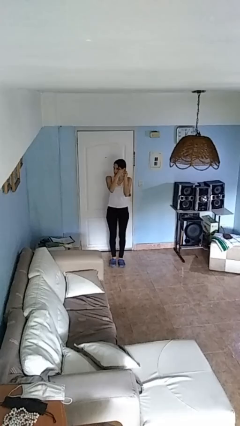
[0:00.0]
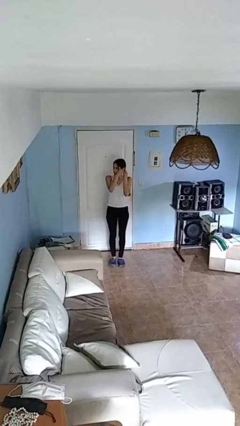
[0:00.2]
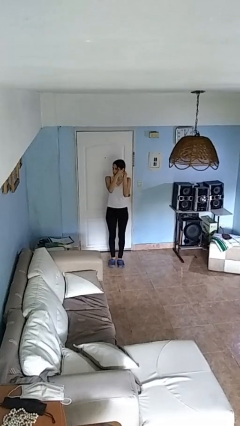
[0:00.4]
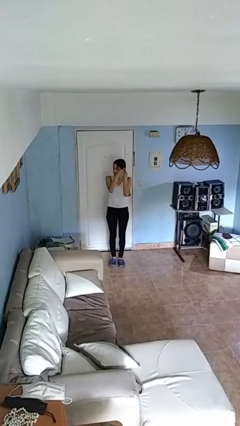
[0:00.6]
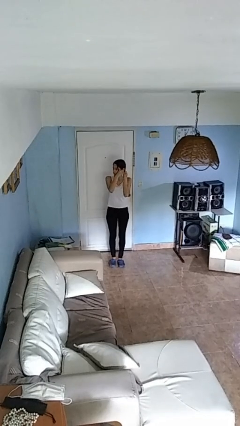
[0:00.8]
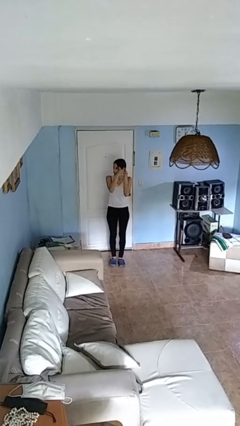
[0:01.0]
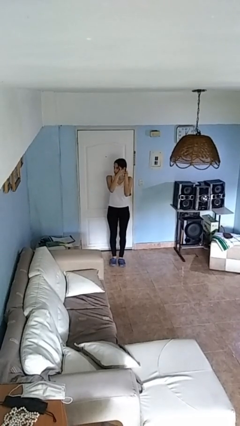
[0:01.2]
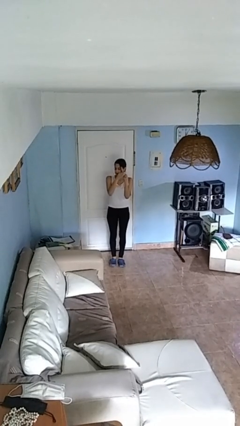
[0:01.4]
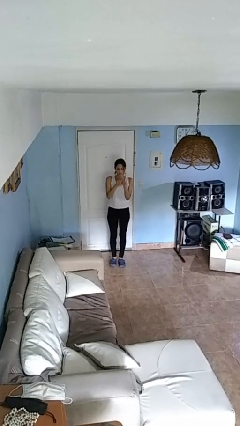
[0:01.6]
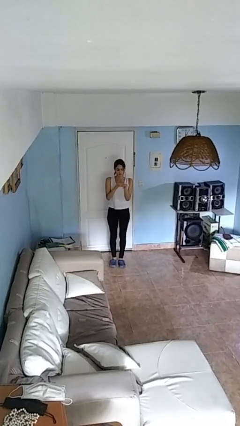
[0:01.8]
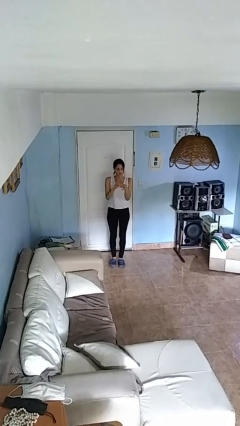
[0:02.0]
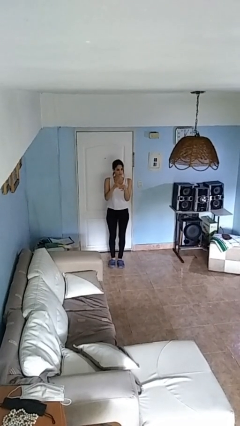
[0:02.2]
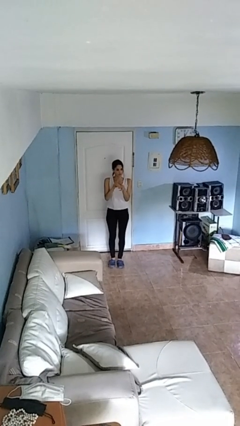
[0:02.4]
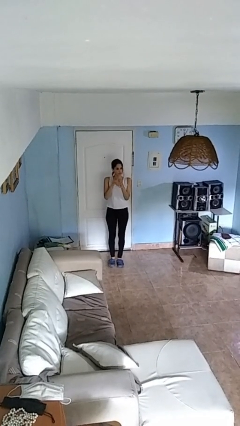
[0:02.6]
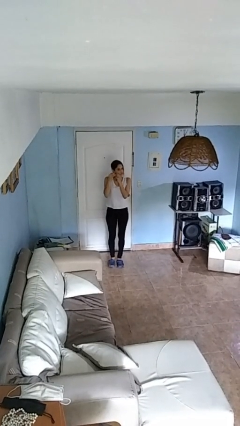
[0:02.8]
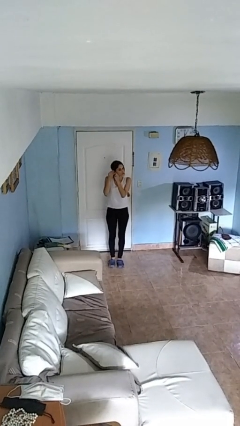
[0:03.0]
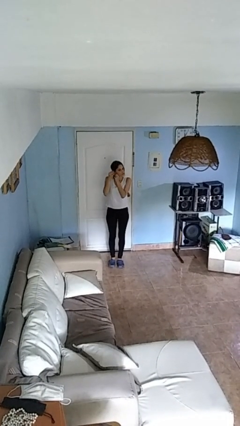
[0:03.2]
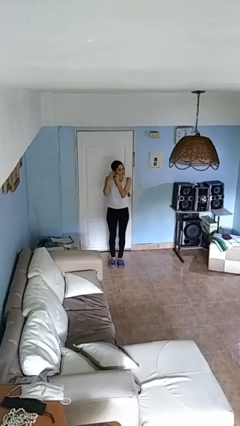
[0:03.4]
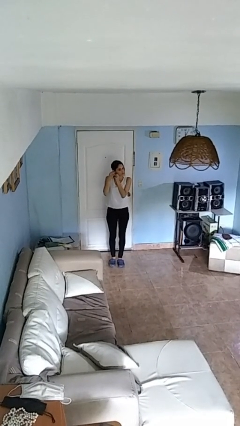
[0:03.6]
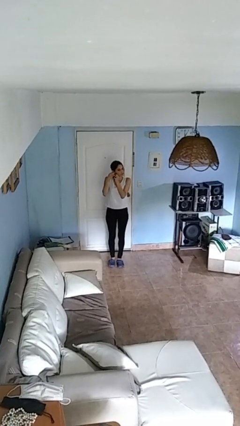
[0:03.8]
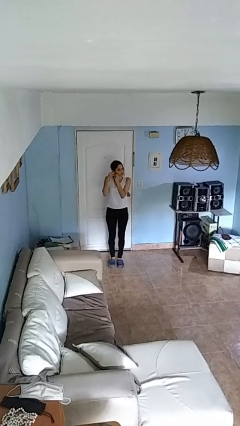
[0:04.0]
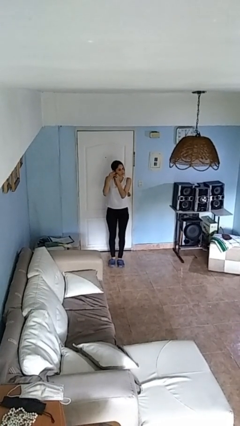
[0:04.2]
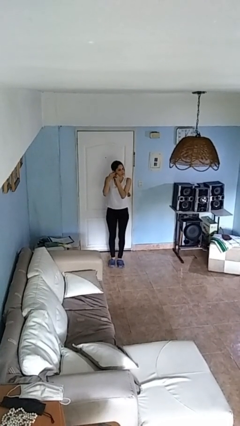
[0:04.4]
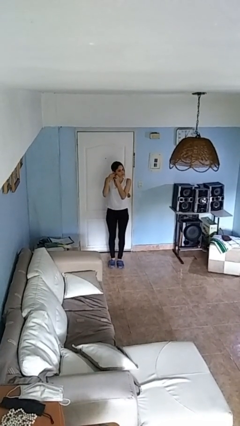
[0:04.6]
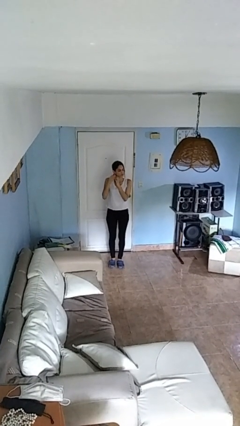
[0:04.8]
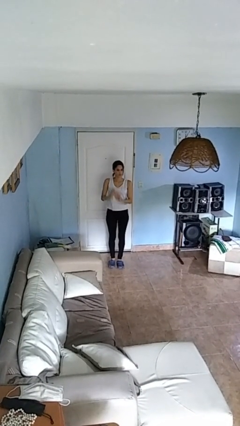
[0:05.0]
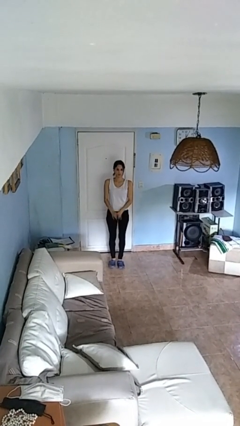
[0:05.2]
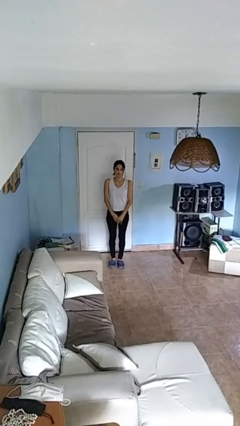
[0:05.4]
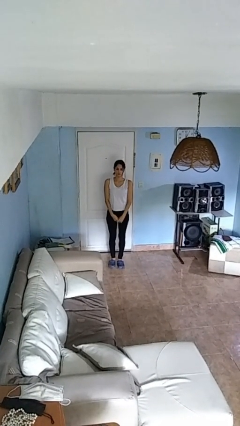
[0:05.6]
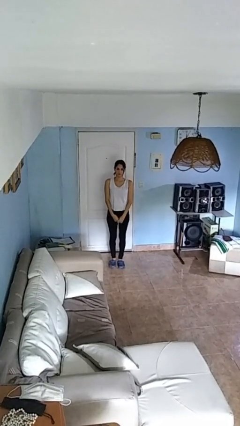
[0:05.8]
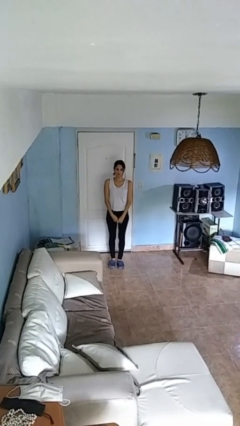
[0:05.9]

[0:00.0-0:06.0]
person puts on earrings

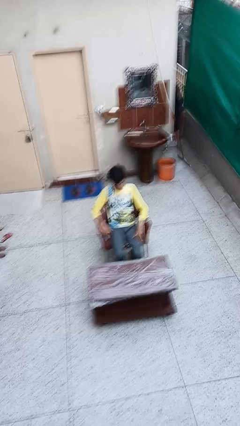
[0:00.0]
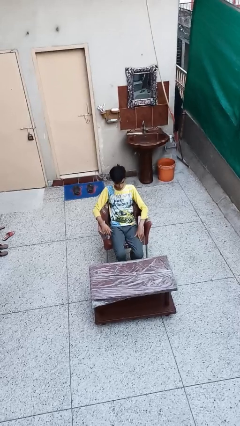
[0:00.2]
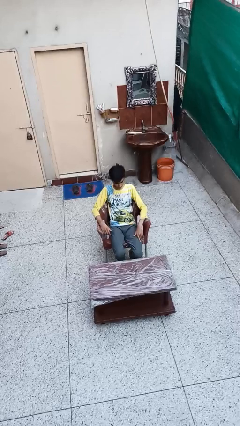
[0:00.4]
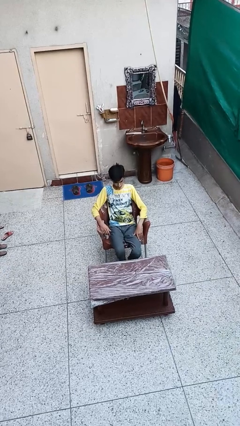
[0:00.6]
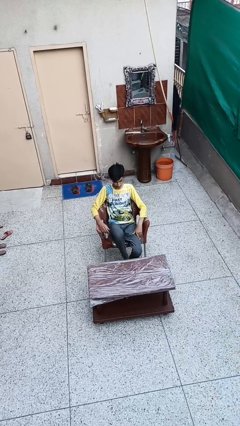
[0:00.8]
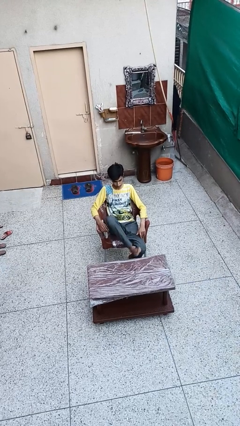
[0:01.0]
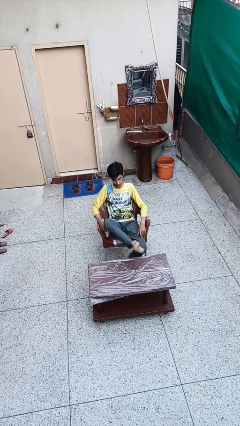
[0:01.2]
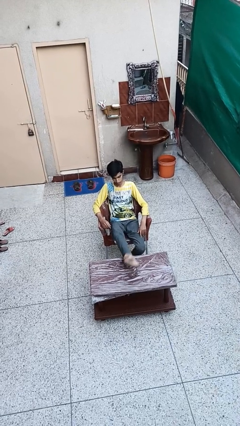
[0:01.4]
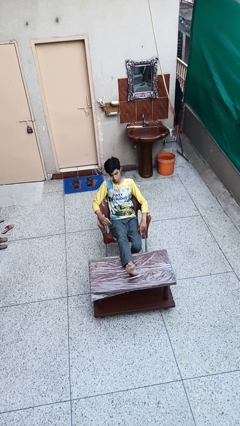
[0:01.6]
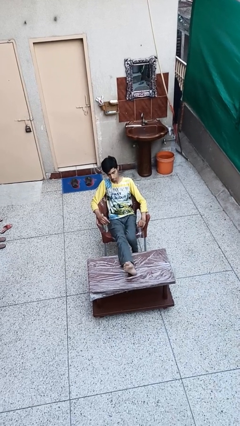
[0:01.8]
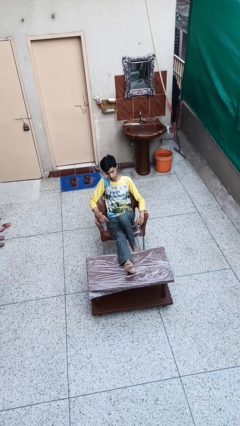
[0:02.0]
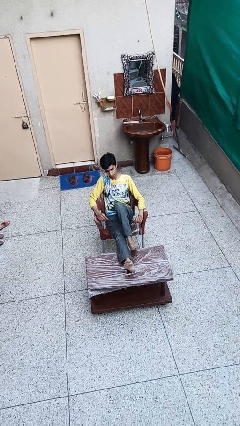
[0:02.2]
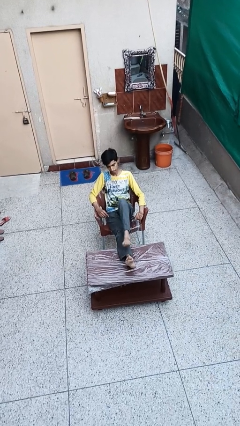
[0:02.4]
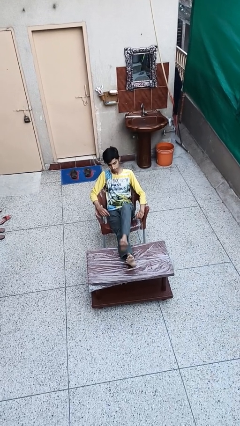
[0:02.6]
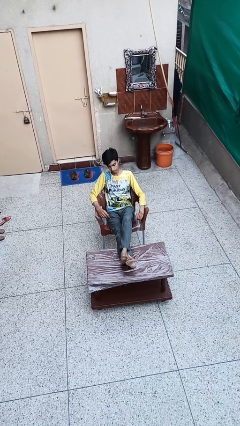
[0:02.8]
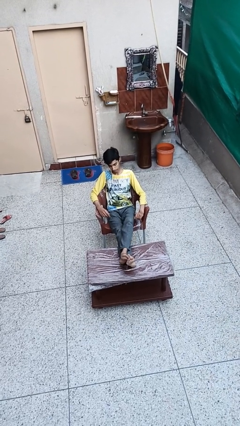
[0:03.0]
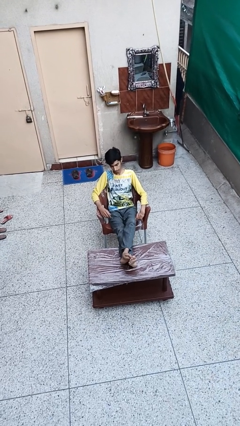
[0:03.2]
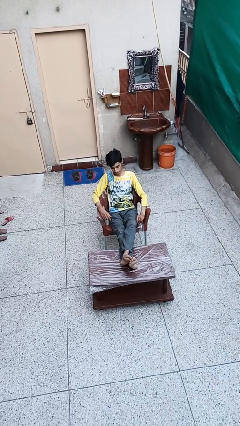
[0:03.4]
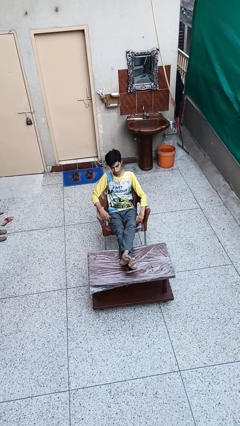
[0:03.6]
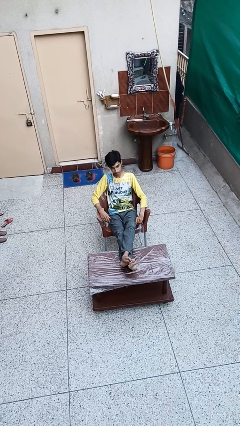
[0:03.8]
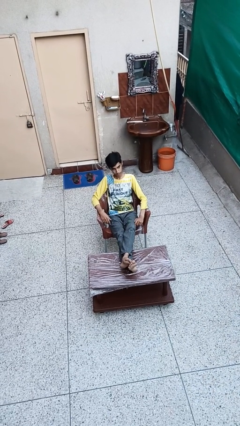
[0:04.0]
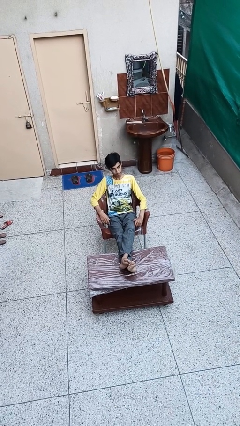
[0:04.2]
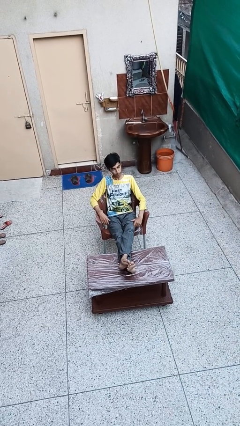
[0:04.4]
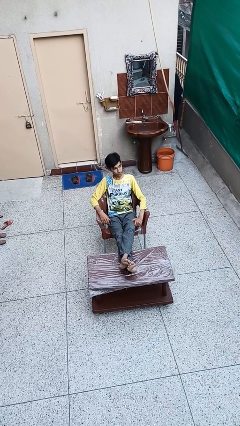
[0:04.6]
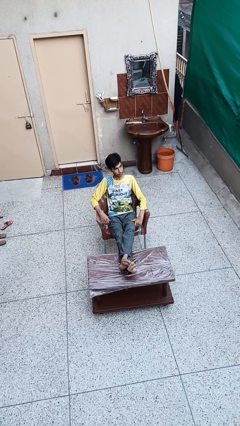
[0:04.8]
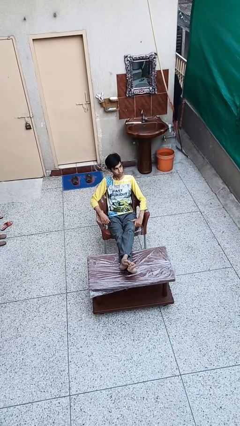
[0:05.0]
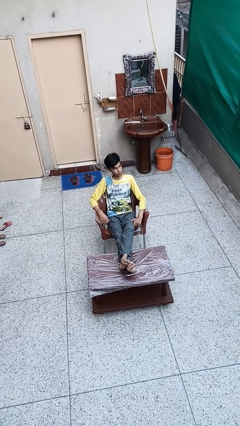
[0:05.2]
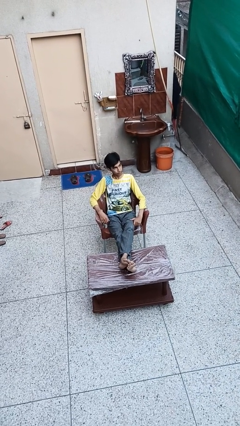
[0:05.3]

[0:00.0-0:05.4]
person puts feet up

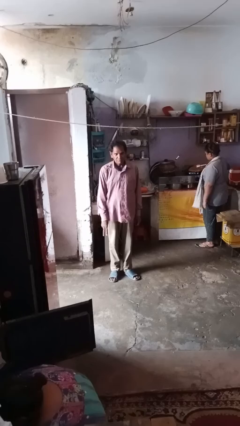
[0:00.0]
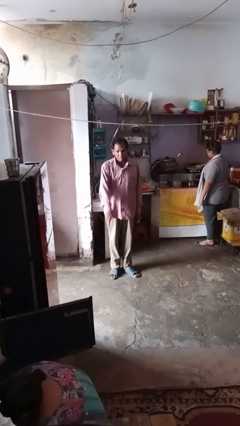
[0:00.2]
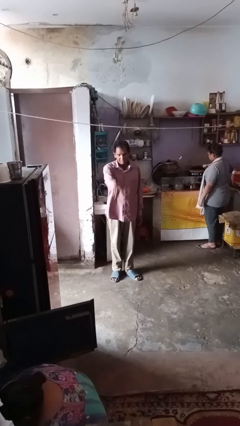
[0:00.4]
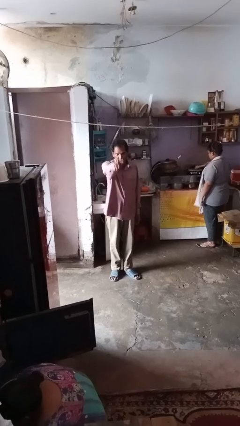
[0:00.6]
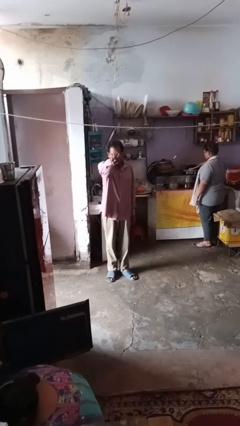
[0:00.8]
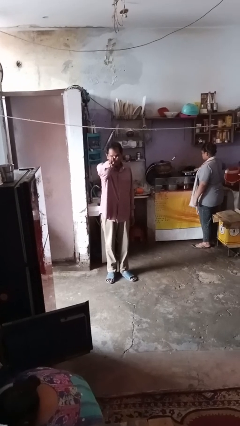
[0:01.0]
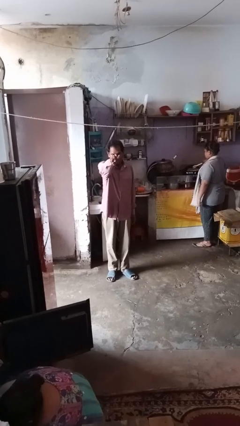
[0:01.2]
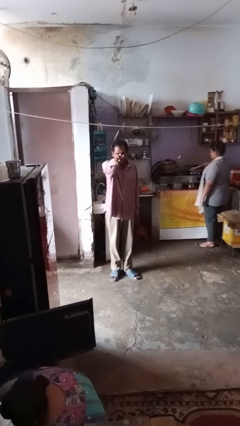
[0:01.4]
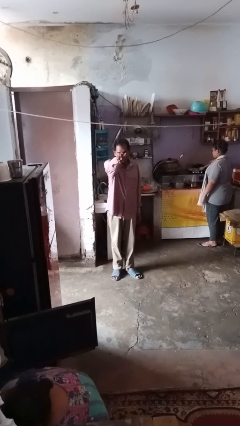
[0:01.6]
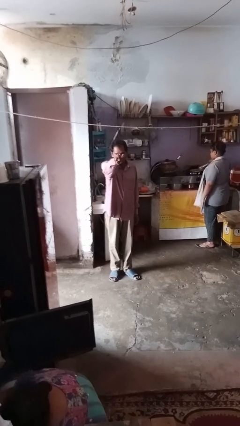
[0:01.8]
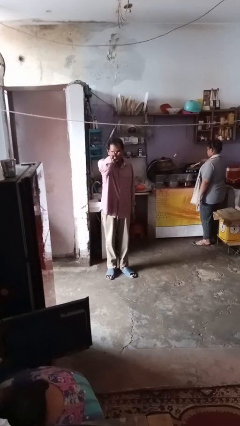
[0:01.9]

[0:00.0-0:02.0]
person gestures behind me

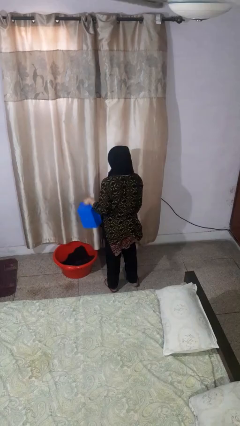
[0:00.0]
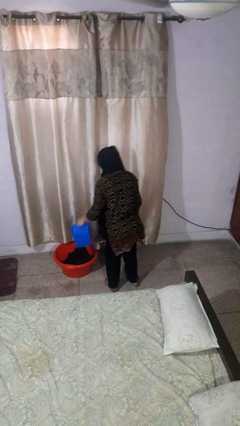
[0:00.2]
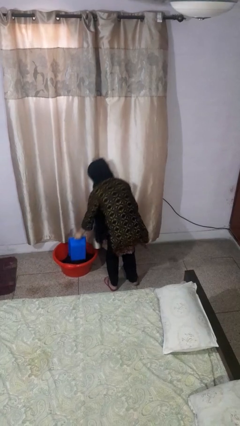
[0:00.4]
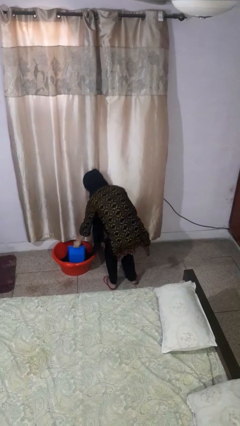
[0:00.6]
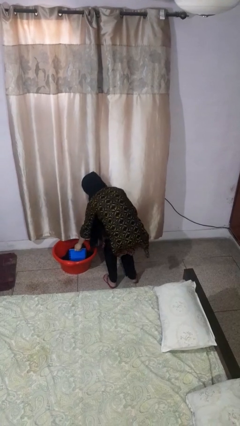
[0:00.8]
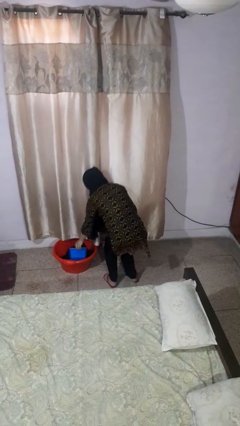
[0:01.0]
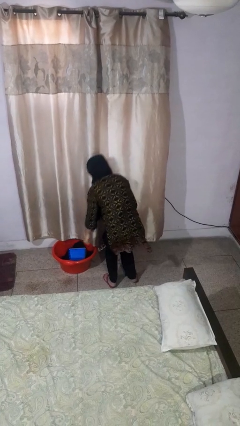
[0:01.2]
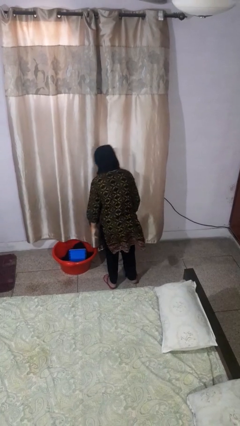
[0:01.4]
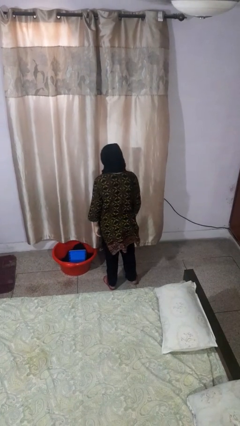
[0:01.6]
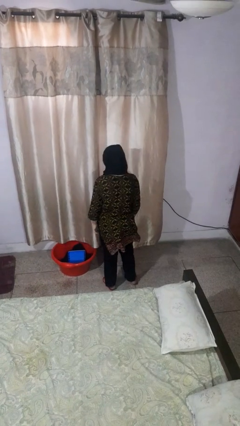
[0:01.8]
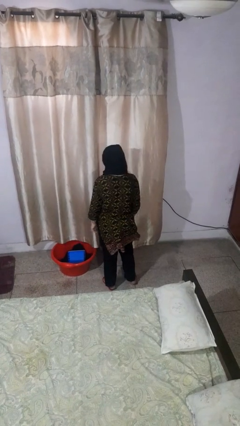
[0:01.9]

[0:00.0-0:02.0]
person puts object into basket

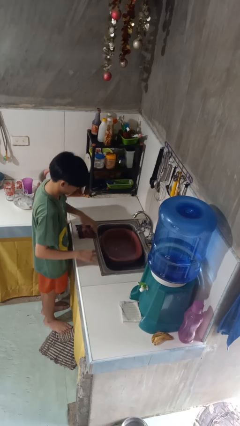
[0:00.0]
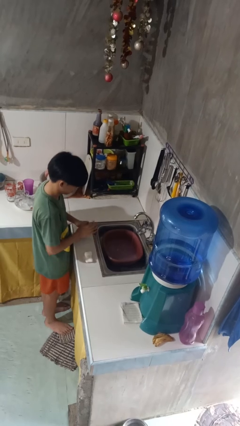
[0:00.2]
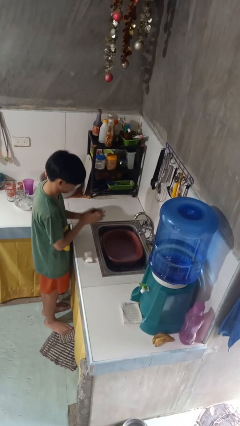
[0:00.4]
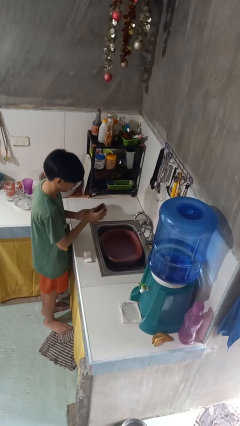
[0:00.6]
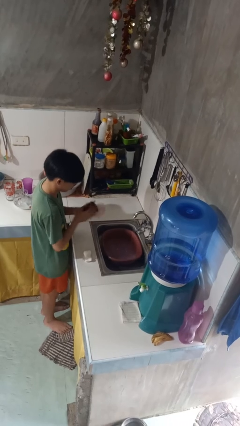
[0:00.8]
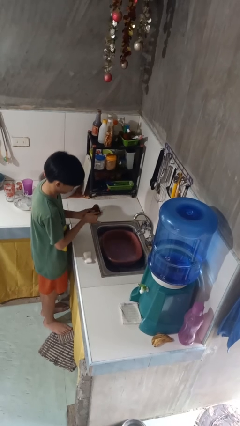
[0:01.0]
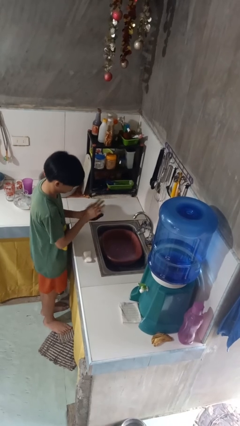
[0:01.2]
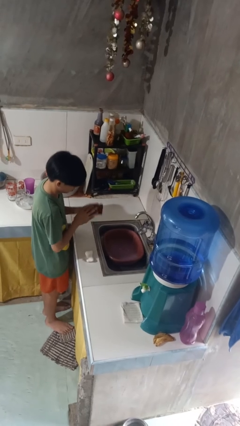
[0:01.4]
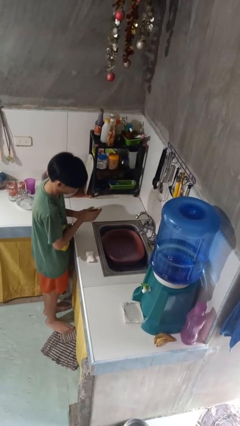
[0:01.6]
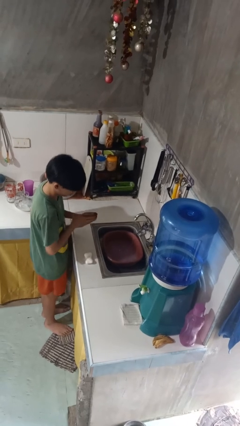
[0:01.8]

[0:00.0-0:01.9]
person dries hands with towel

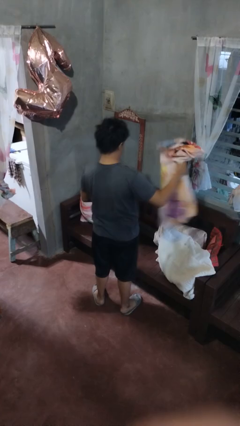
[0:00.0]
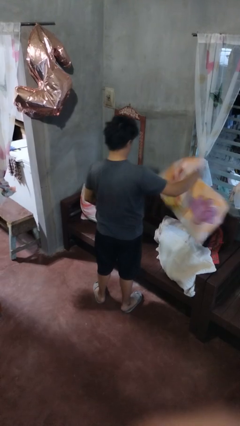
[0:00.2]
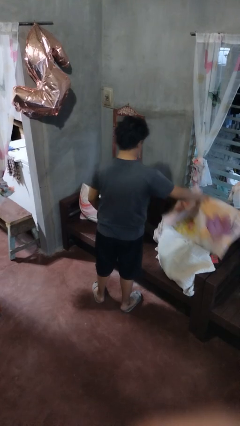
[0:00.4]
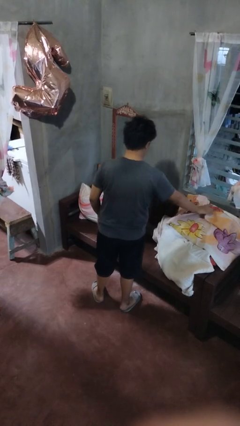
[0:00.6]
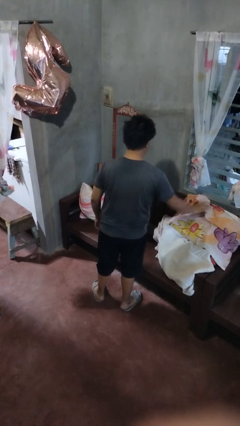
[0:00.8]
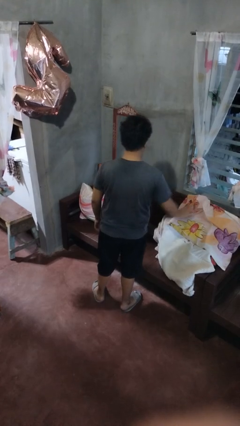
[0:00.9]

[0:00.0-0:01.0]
person puts down object on couch
